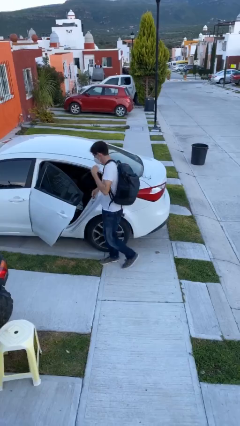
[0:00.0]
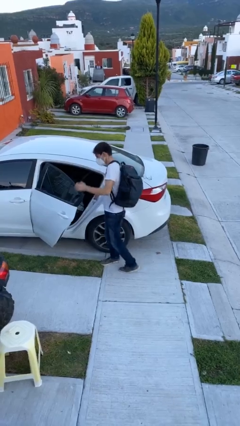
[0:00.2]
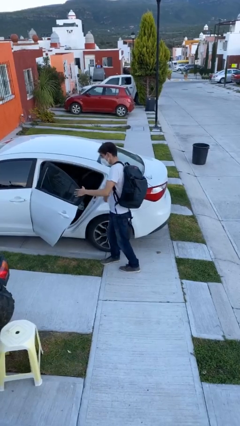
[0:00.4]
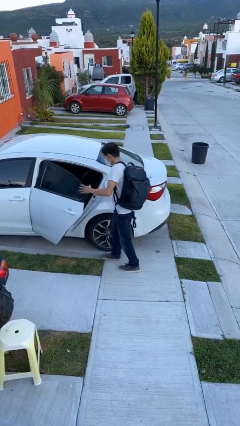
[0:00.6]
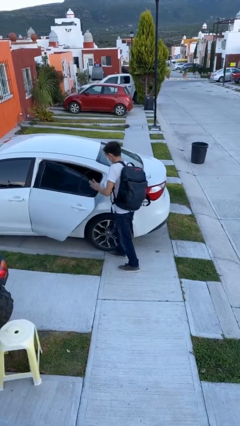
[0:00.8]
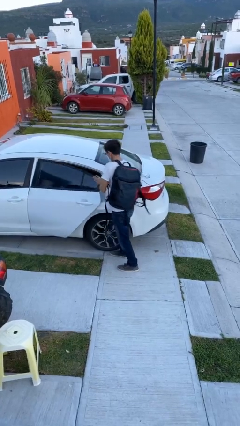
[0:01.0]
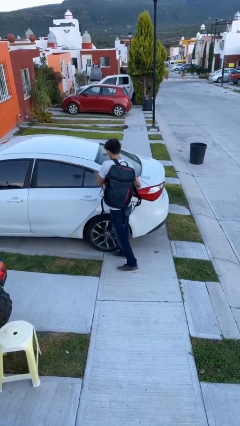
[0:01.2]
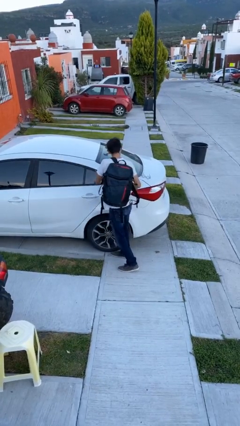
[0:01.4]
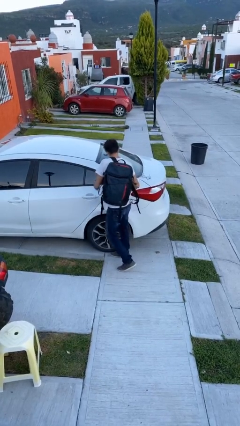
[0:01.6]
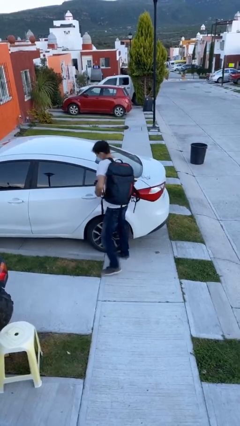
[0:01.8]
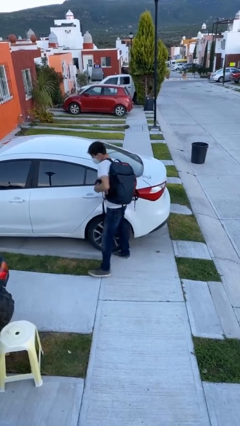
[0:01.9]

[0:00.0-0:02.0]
person closes car door

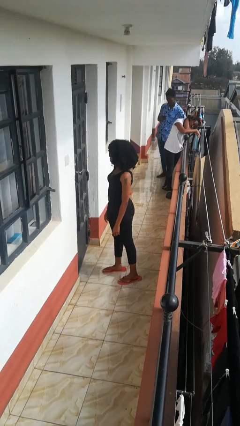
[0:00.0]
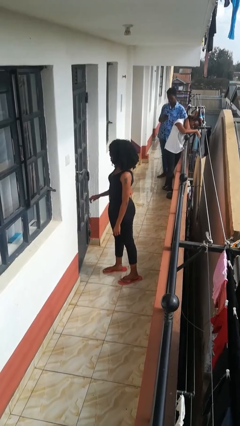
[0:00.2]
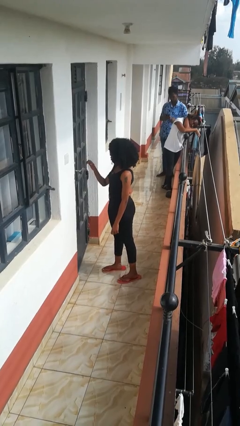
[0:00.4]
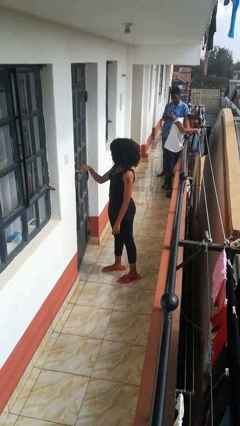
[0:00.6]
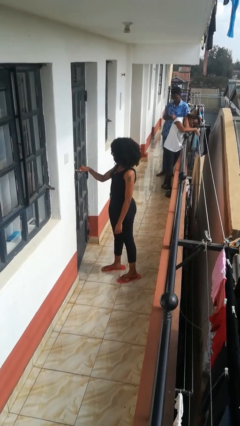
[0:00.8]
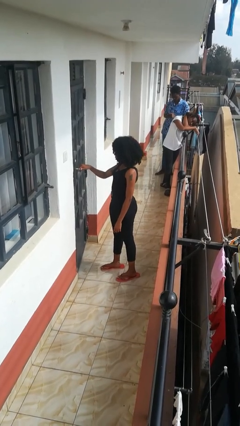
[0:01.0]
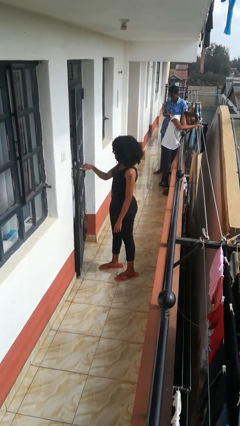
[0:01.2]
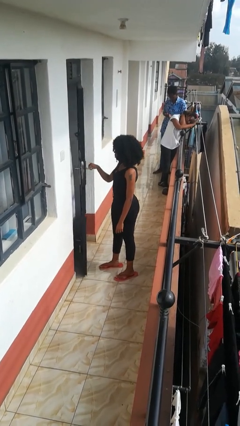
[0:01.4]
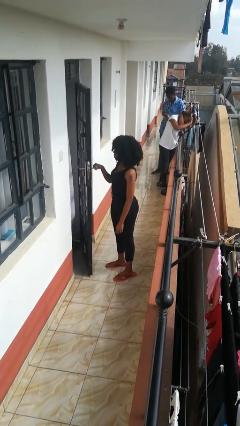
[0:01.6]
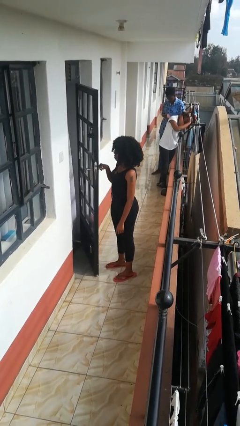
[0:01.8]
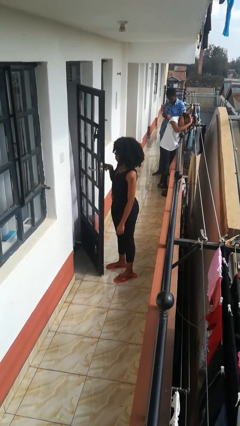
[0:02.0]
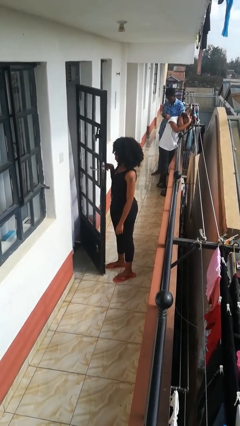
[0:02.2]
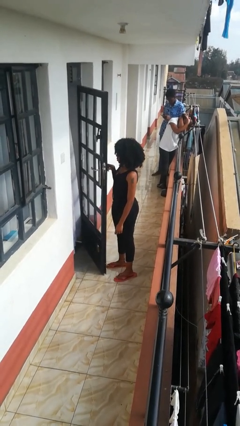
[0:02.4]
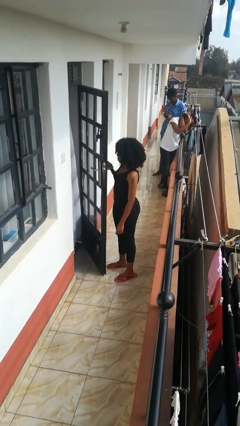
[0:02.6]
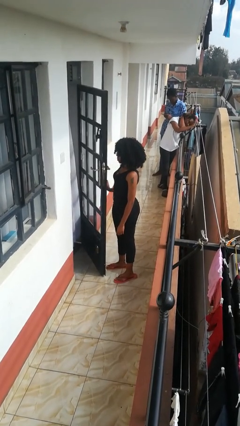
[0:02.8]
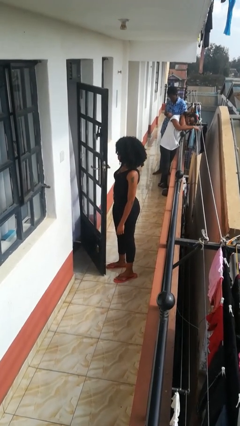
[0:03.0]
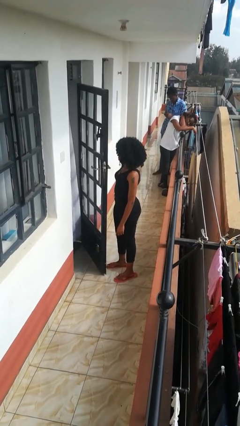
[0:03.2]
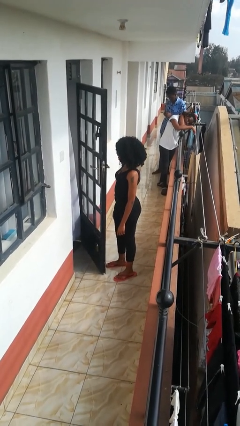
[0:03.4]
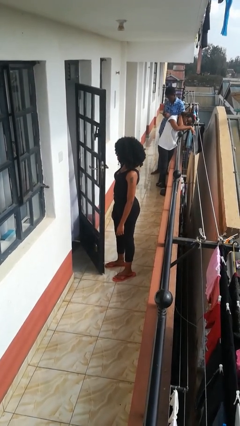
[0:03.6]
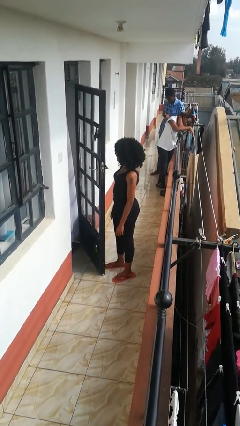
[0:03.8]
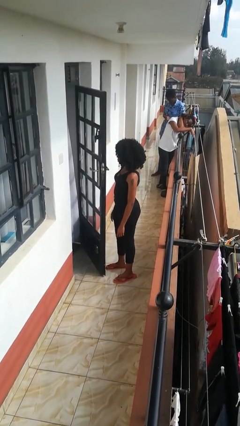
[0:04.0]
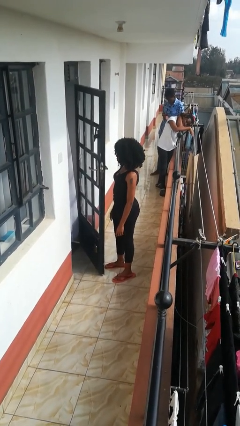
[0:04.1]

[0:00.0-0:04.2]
person opens facility door

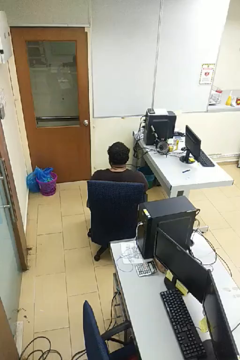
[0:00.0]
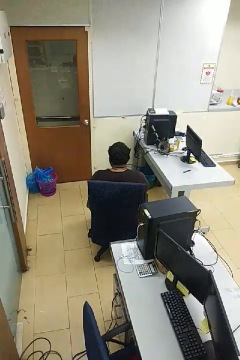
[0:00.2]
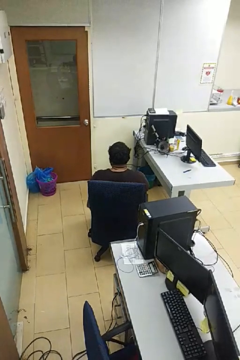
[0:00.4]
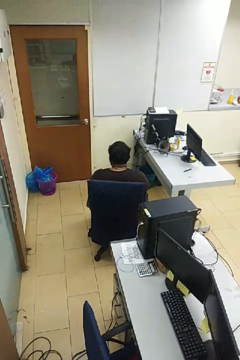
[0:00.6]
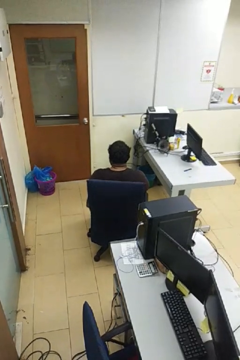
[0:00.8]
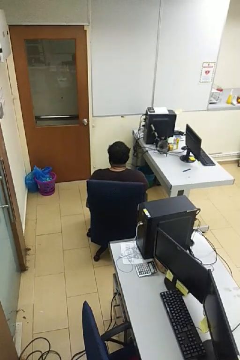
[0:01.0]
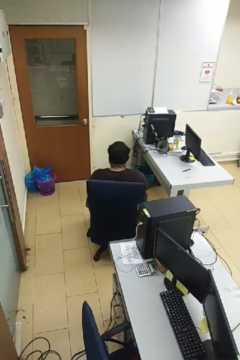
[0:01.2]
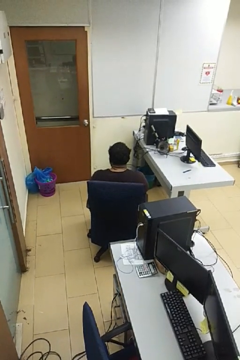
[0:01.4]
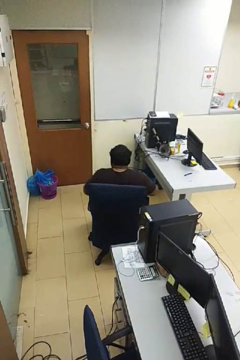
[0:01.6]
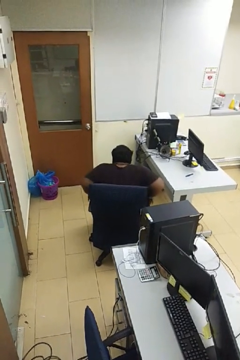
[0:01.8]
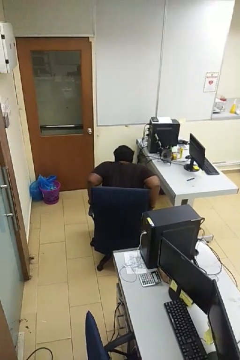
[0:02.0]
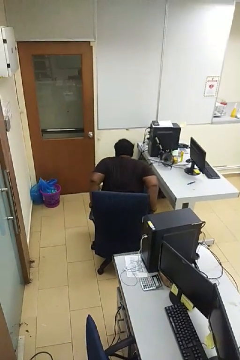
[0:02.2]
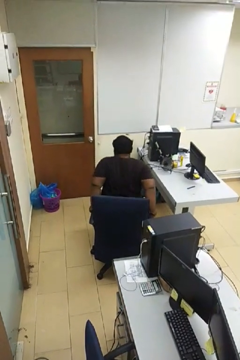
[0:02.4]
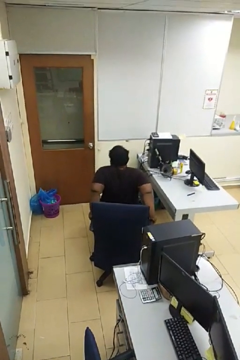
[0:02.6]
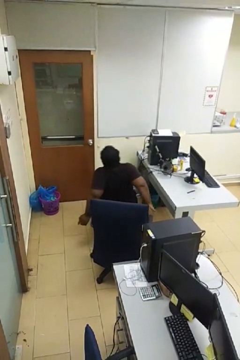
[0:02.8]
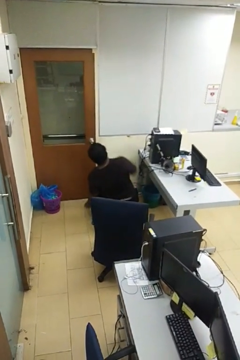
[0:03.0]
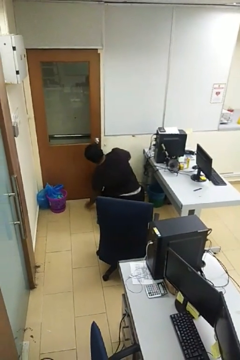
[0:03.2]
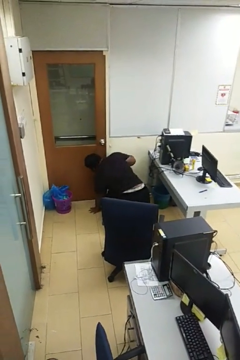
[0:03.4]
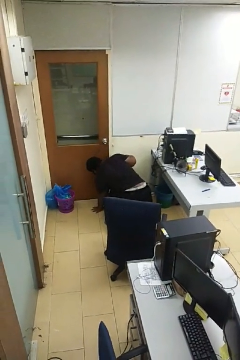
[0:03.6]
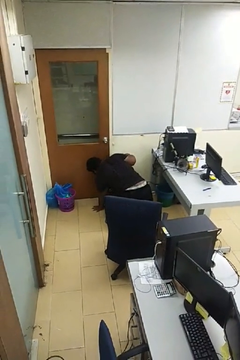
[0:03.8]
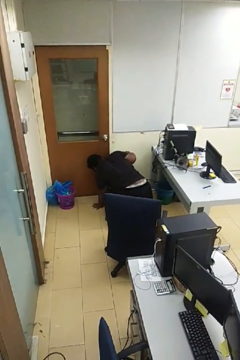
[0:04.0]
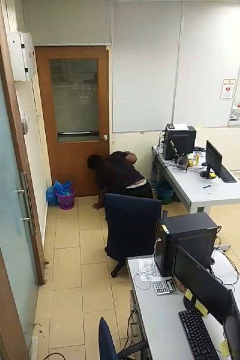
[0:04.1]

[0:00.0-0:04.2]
person falls from chair

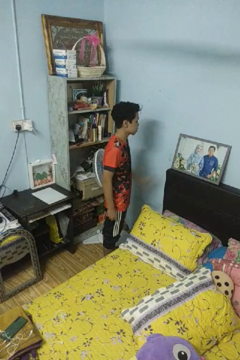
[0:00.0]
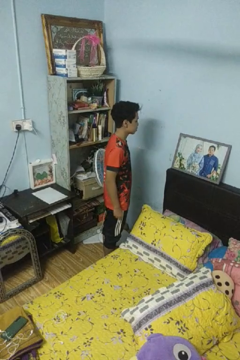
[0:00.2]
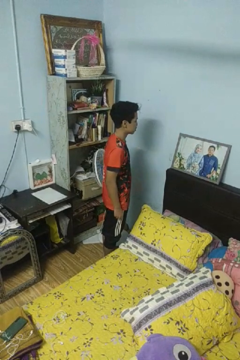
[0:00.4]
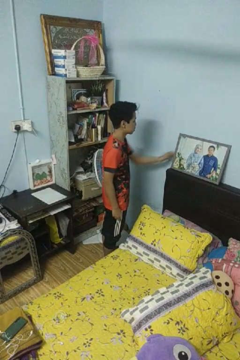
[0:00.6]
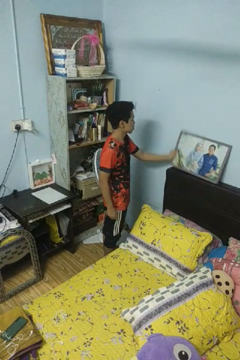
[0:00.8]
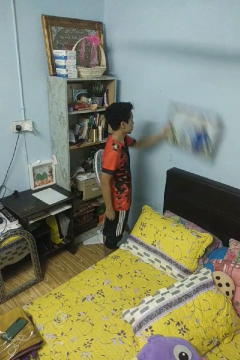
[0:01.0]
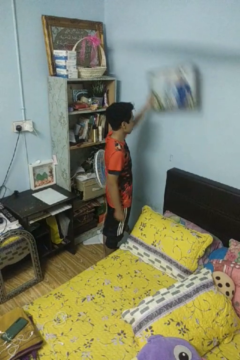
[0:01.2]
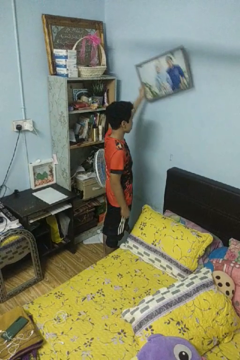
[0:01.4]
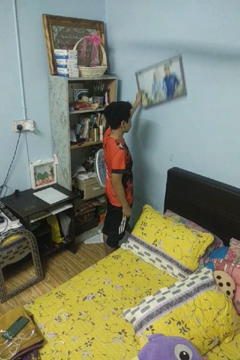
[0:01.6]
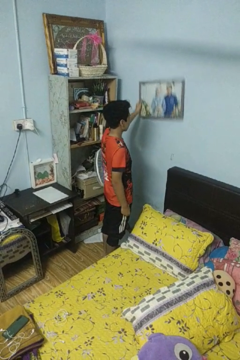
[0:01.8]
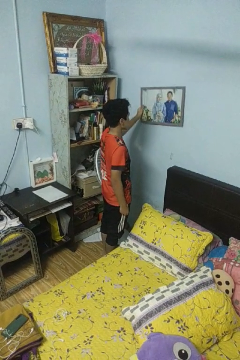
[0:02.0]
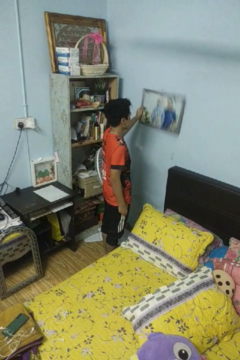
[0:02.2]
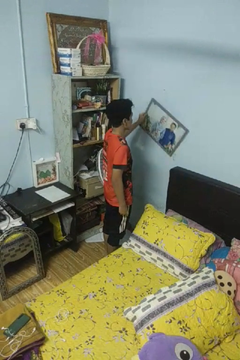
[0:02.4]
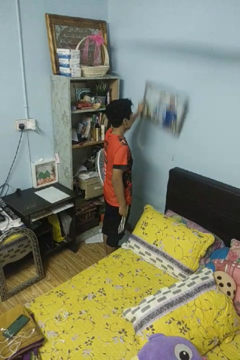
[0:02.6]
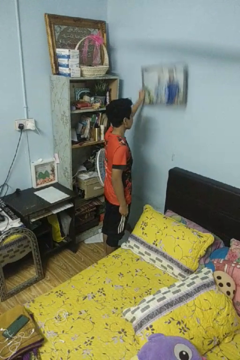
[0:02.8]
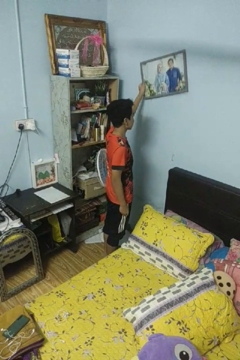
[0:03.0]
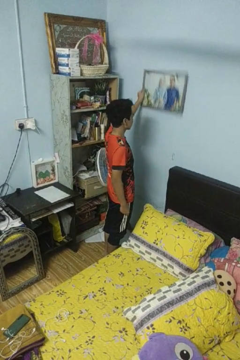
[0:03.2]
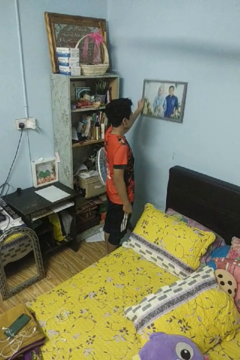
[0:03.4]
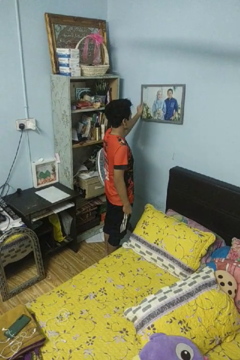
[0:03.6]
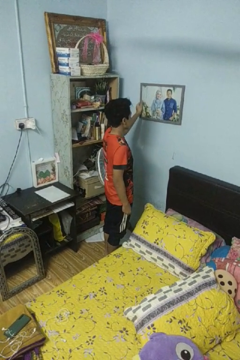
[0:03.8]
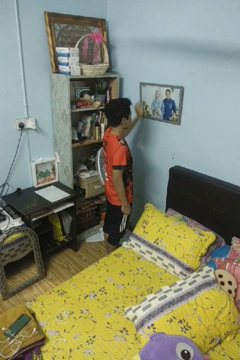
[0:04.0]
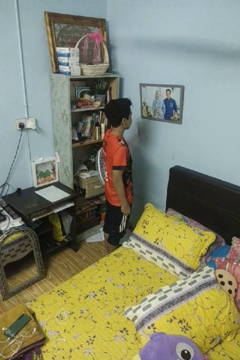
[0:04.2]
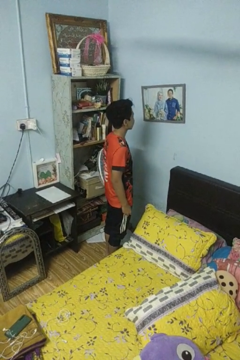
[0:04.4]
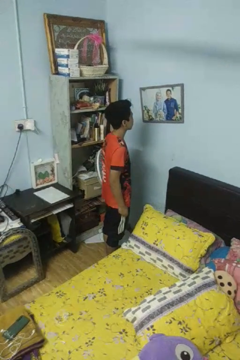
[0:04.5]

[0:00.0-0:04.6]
person puts up picture frame

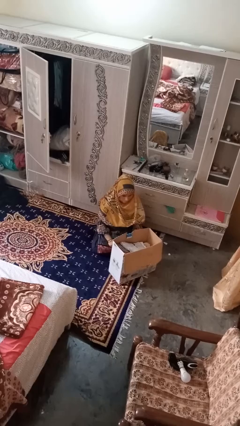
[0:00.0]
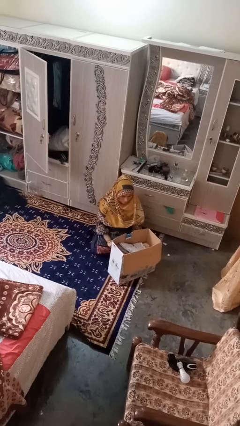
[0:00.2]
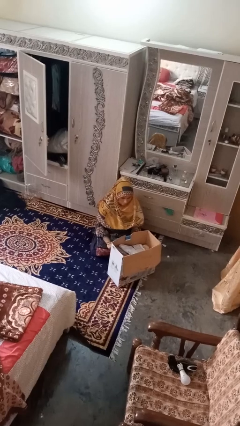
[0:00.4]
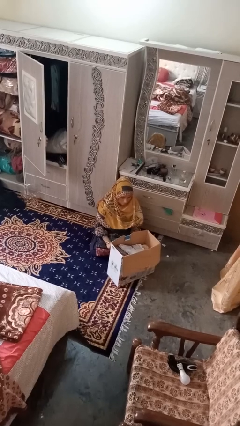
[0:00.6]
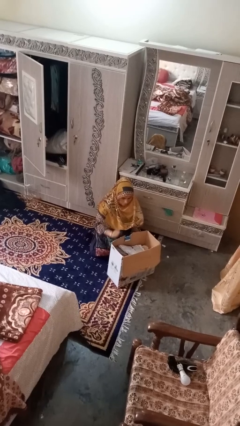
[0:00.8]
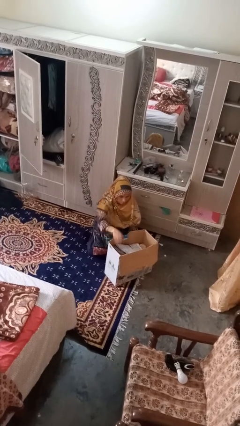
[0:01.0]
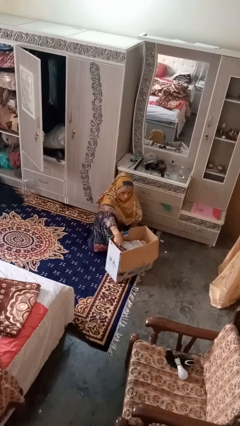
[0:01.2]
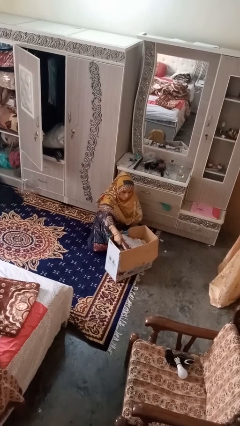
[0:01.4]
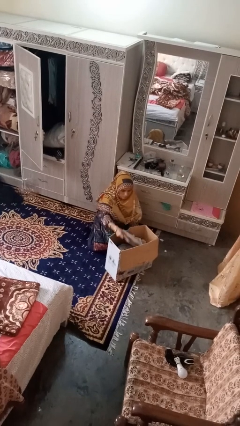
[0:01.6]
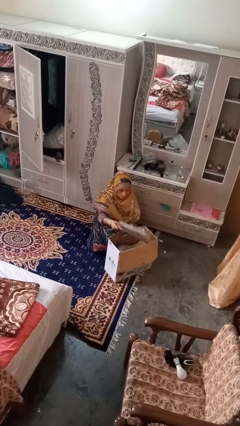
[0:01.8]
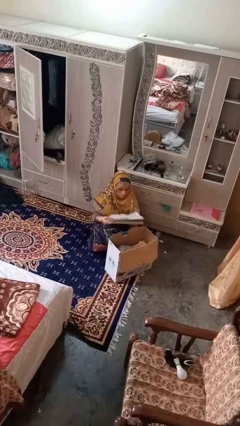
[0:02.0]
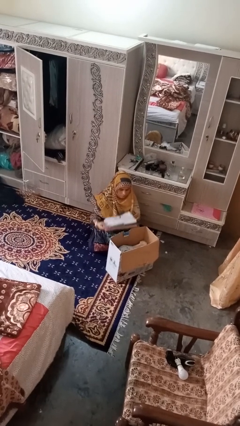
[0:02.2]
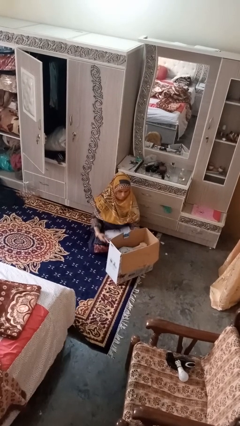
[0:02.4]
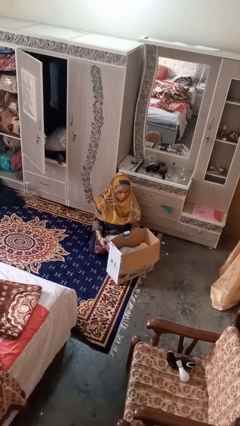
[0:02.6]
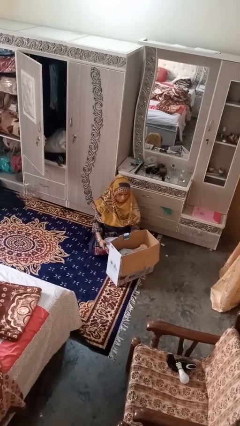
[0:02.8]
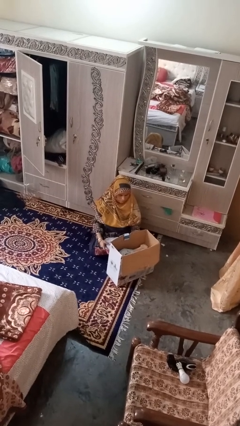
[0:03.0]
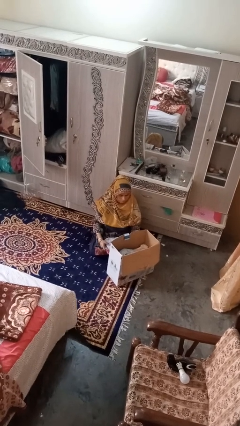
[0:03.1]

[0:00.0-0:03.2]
person takes object from box

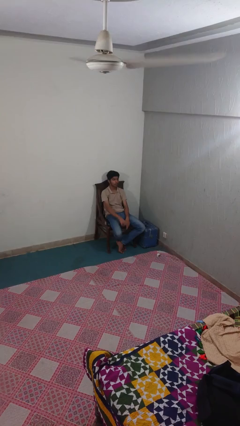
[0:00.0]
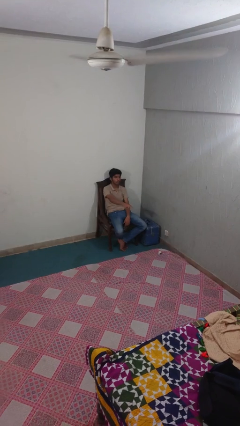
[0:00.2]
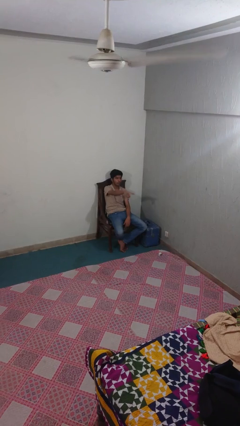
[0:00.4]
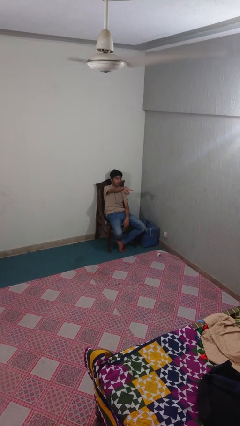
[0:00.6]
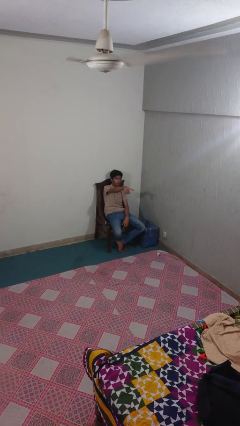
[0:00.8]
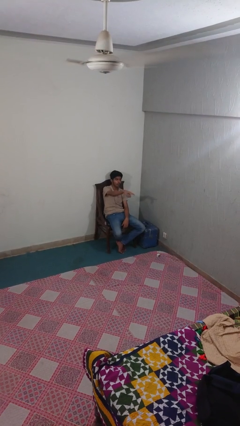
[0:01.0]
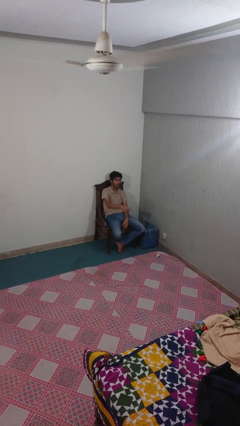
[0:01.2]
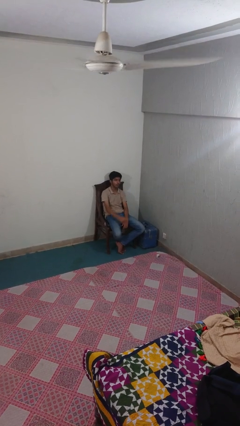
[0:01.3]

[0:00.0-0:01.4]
person points at person
